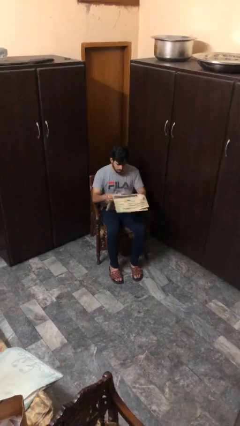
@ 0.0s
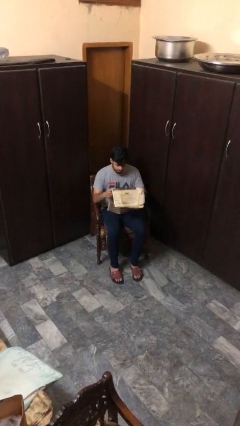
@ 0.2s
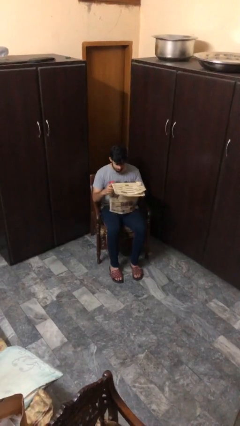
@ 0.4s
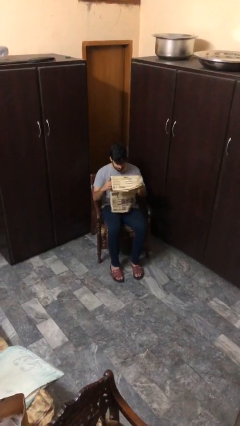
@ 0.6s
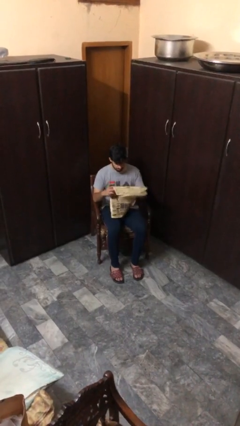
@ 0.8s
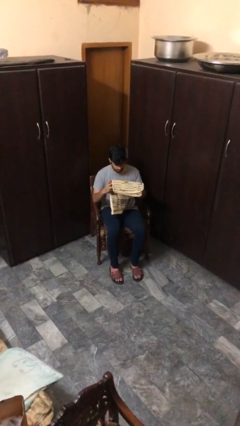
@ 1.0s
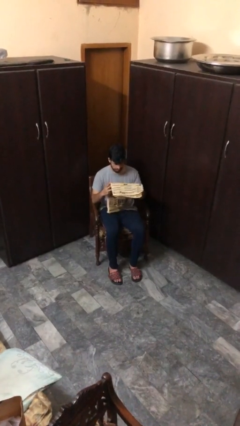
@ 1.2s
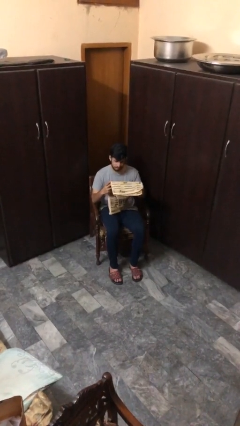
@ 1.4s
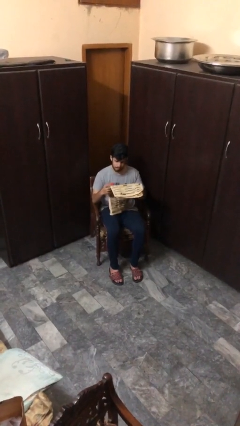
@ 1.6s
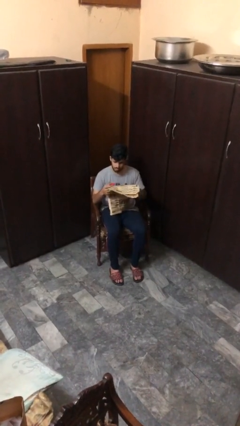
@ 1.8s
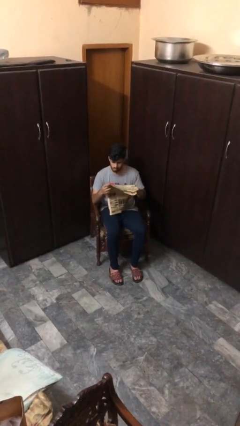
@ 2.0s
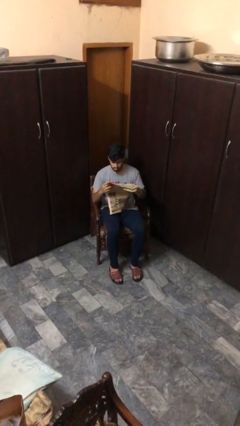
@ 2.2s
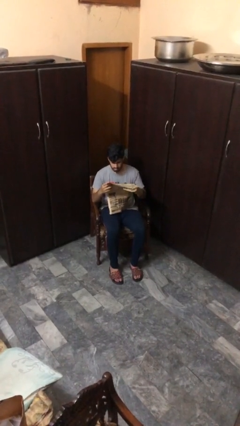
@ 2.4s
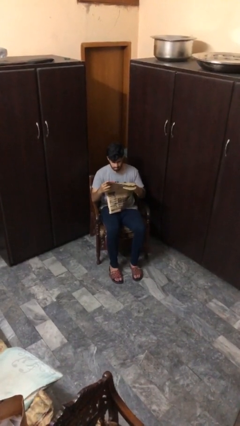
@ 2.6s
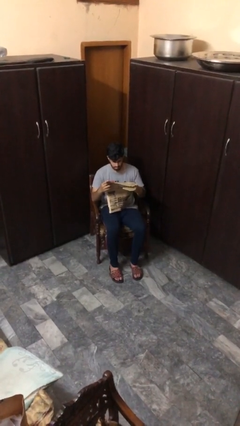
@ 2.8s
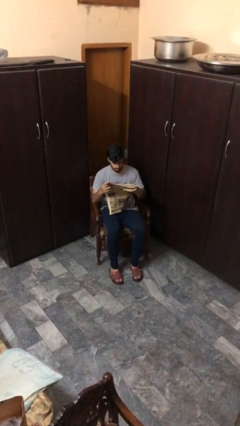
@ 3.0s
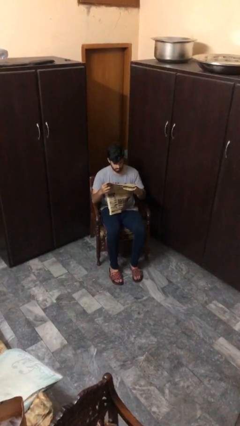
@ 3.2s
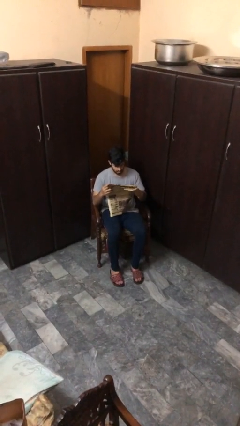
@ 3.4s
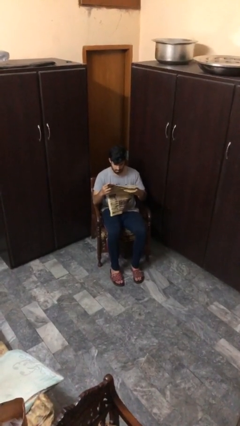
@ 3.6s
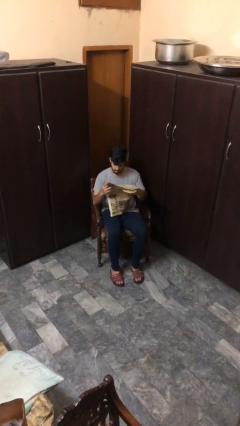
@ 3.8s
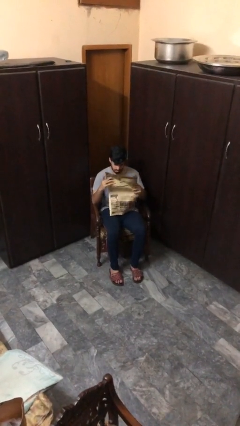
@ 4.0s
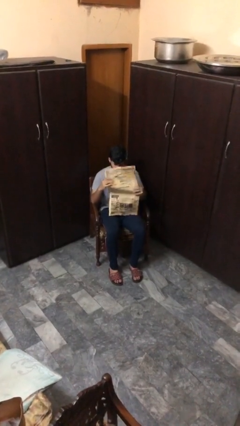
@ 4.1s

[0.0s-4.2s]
person reads newspaper

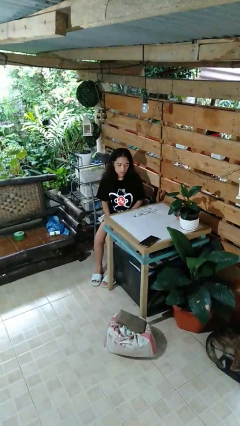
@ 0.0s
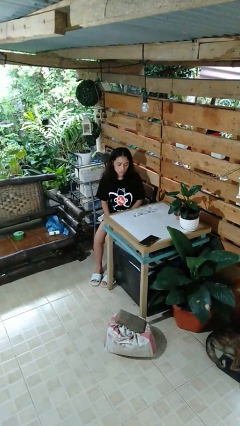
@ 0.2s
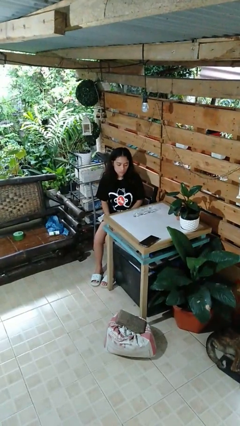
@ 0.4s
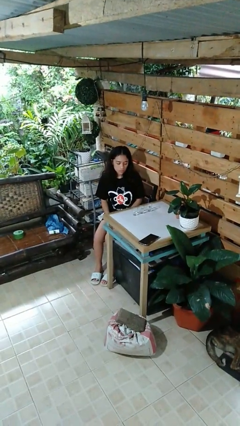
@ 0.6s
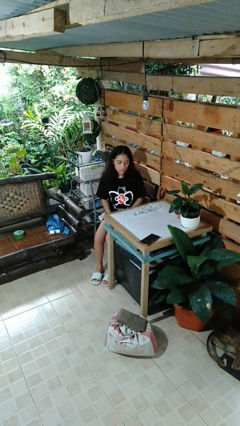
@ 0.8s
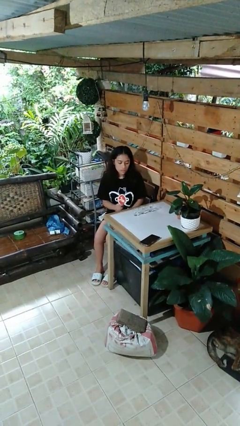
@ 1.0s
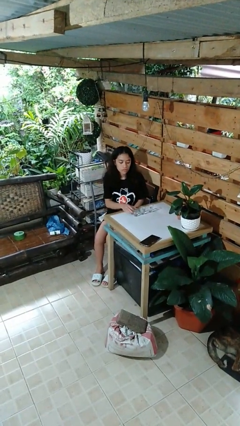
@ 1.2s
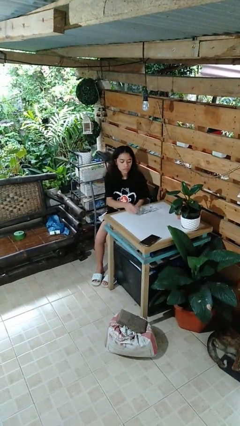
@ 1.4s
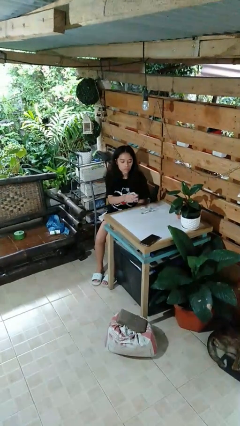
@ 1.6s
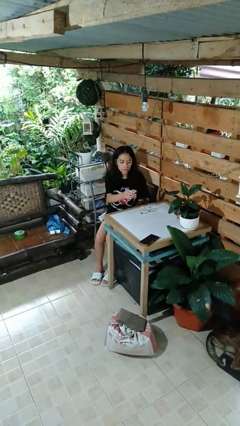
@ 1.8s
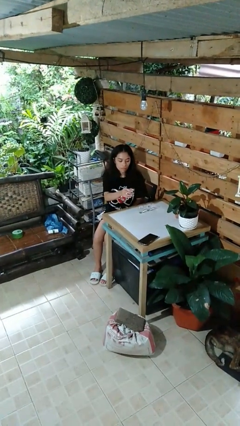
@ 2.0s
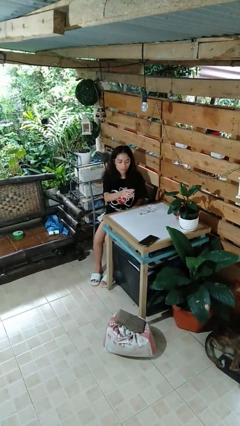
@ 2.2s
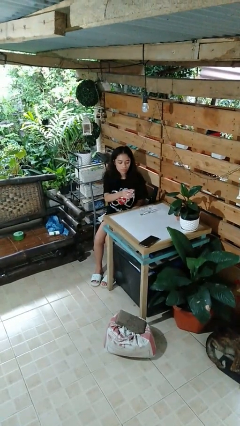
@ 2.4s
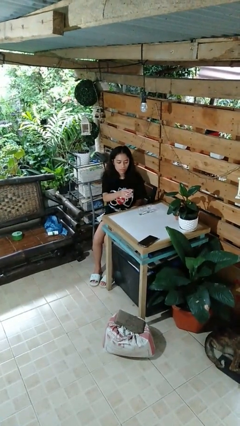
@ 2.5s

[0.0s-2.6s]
person picks up object from table

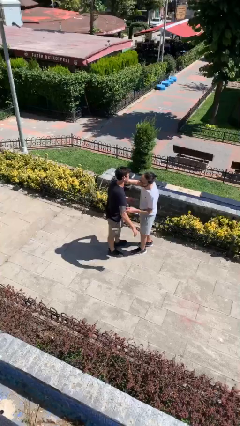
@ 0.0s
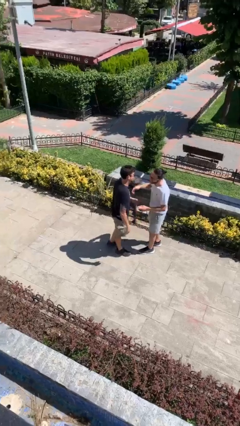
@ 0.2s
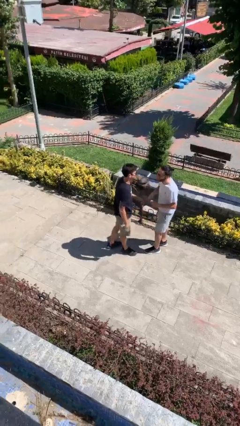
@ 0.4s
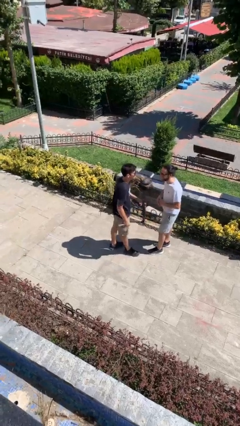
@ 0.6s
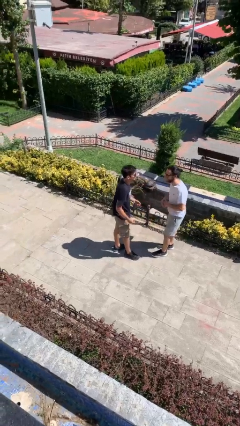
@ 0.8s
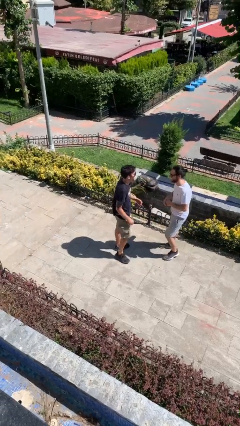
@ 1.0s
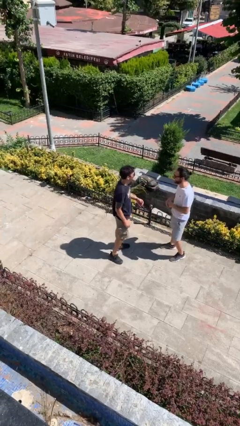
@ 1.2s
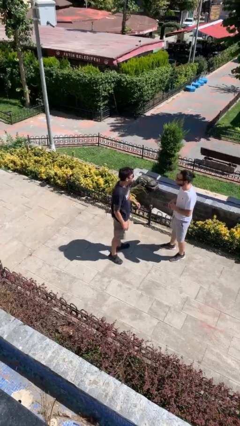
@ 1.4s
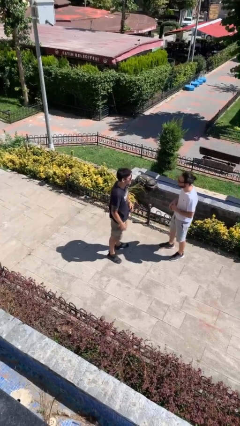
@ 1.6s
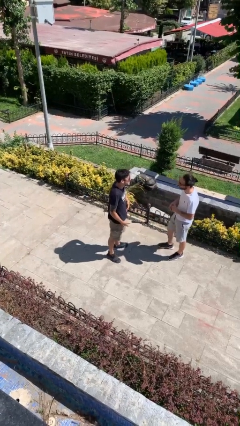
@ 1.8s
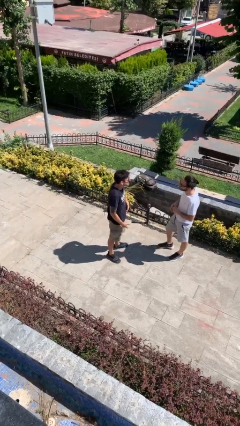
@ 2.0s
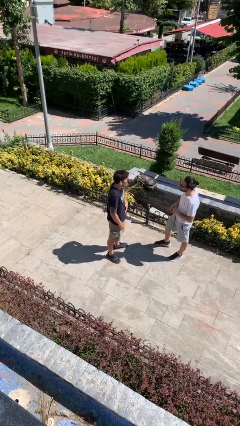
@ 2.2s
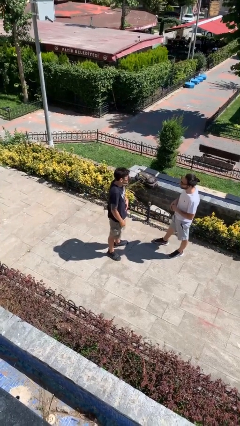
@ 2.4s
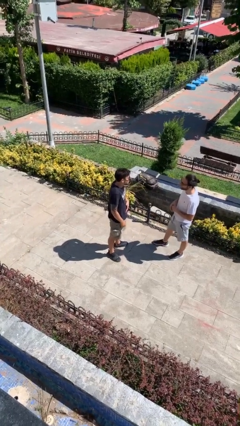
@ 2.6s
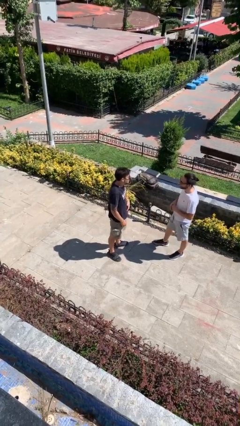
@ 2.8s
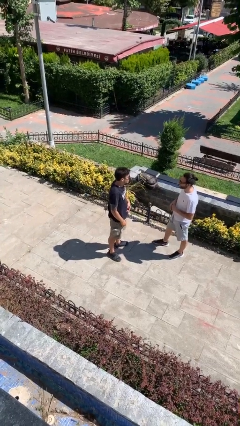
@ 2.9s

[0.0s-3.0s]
person talks to person

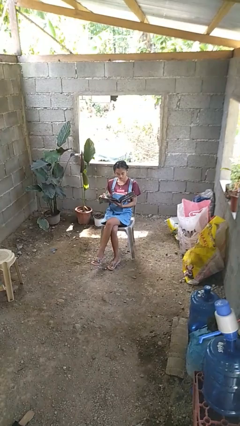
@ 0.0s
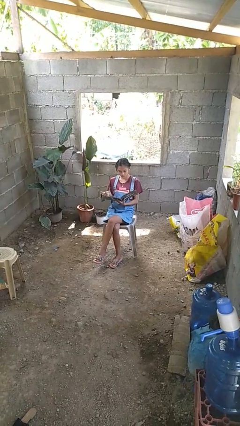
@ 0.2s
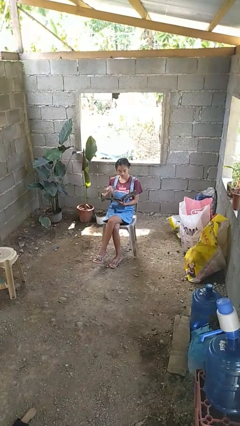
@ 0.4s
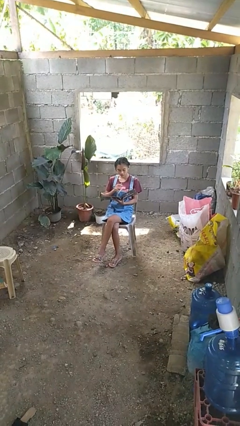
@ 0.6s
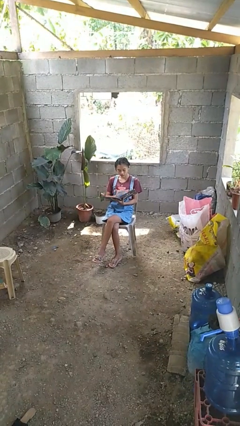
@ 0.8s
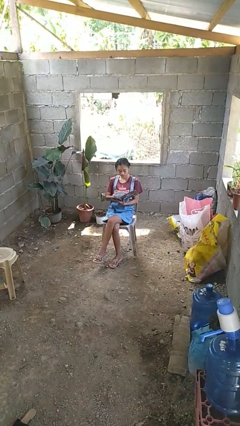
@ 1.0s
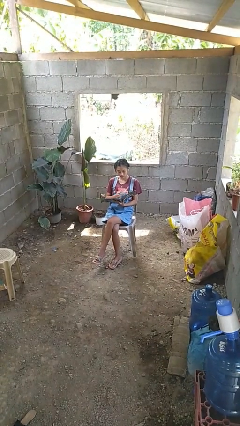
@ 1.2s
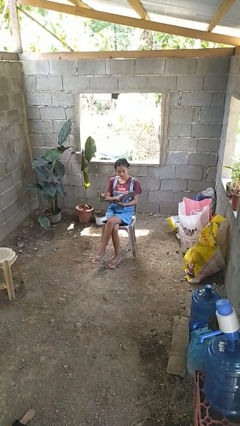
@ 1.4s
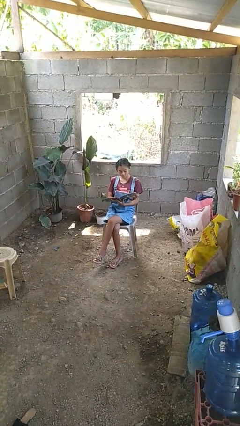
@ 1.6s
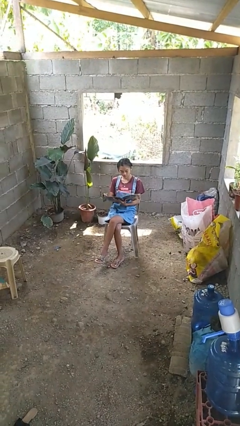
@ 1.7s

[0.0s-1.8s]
person reads magazine

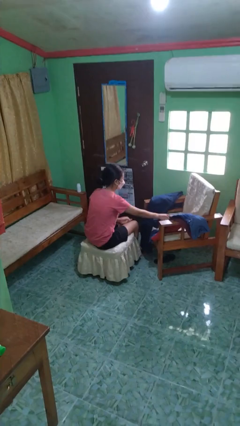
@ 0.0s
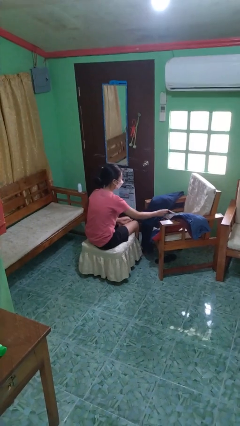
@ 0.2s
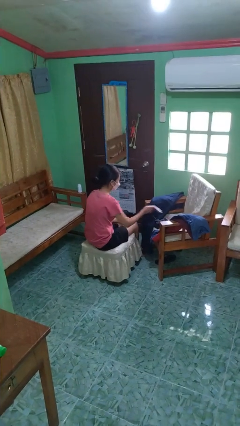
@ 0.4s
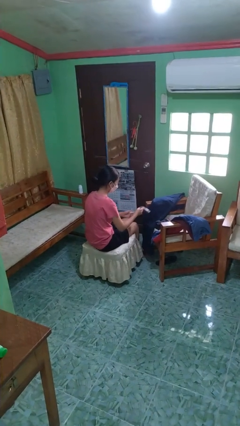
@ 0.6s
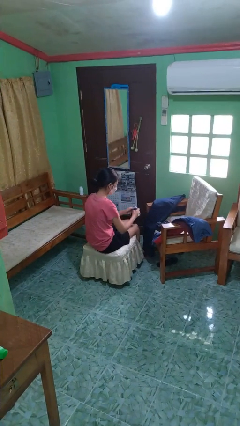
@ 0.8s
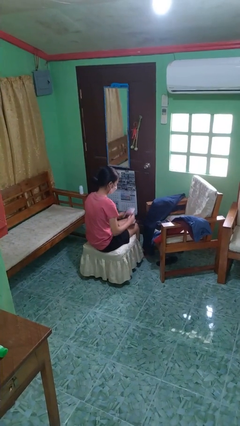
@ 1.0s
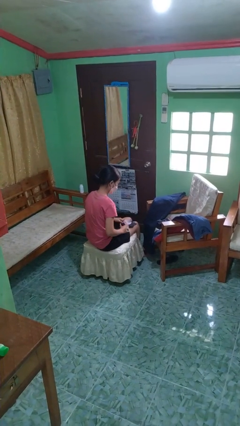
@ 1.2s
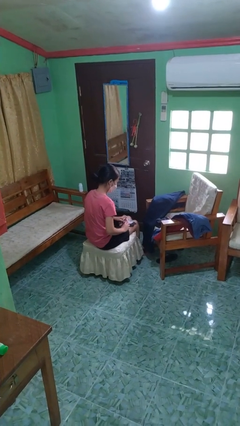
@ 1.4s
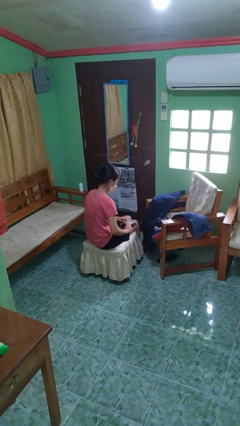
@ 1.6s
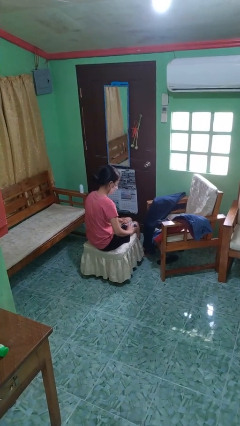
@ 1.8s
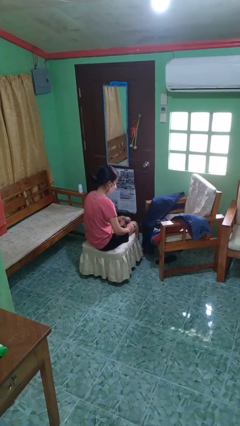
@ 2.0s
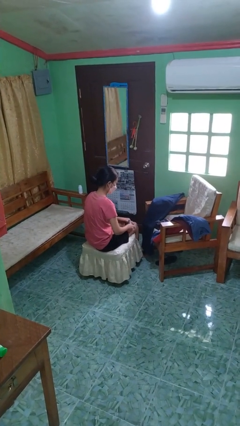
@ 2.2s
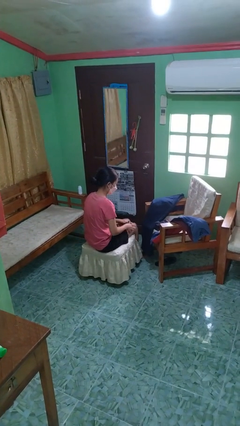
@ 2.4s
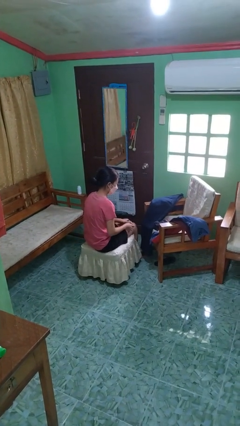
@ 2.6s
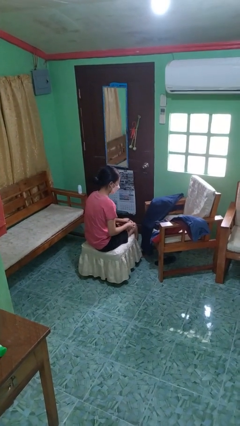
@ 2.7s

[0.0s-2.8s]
person folds socks

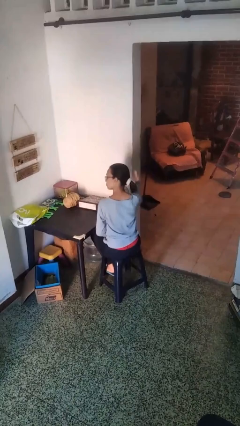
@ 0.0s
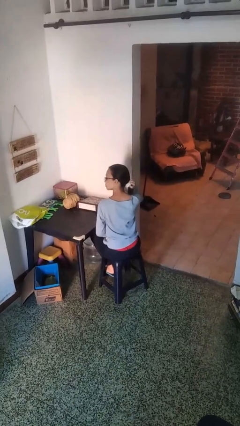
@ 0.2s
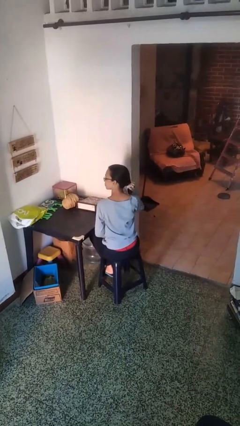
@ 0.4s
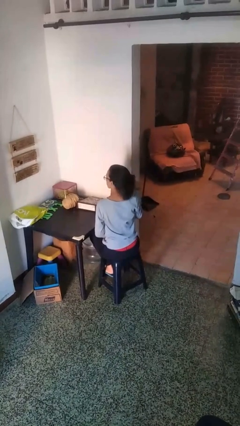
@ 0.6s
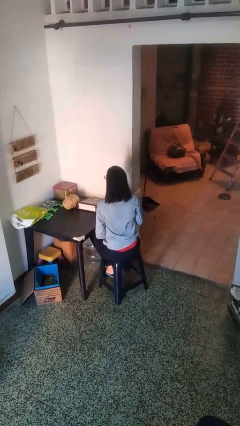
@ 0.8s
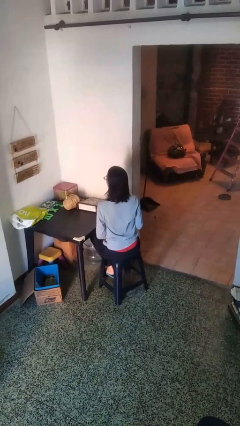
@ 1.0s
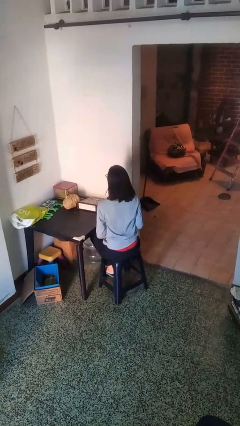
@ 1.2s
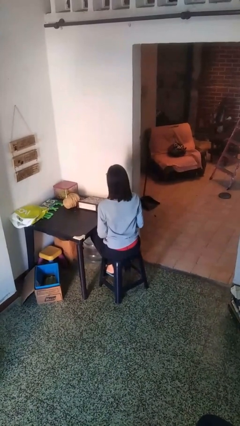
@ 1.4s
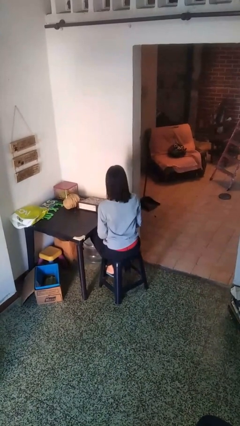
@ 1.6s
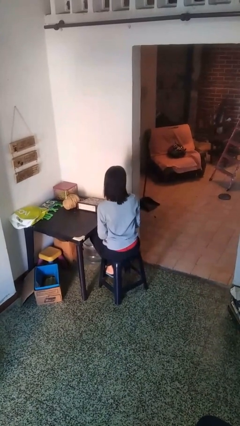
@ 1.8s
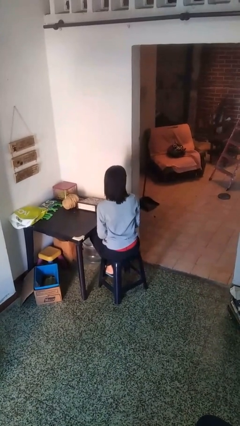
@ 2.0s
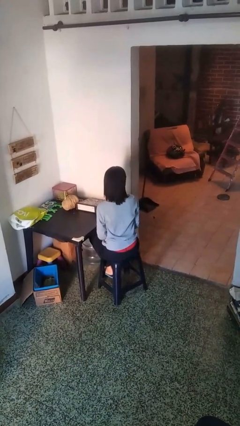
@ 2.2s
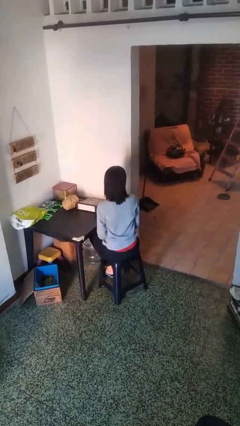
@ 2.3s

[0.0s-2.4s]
person takes off hairtie

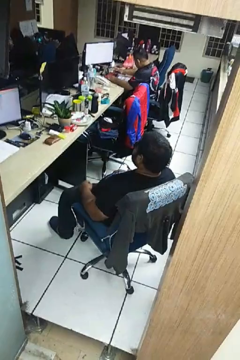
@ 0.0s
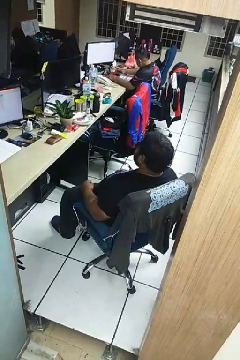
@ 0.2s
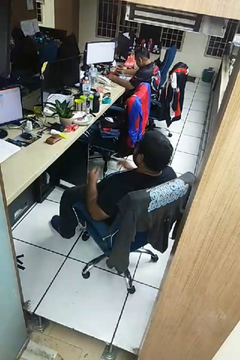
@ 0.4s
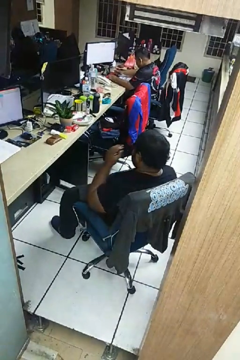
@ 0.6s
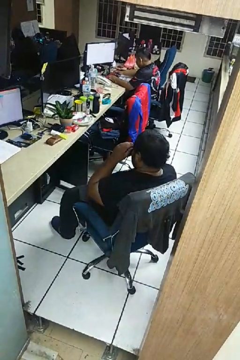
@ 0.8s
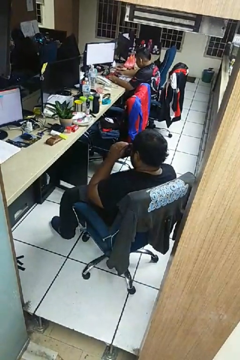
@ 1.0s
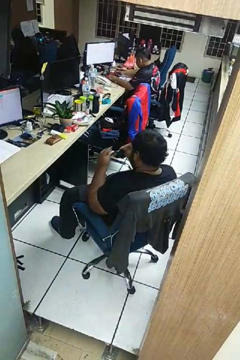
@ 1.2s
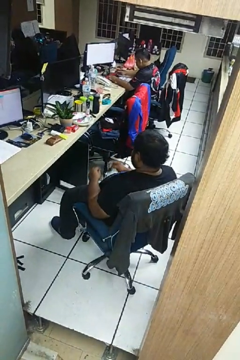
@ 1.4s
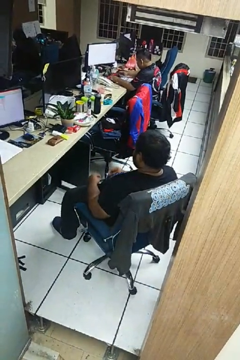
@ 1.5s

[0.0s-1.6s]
person takes off sunglasses
